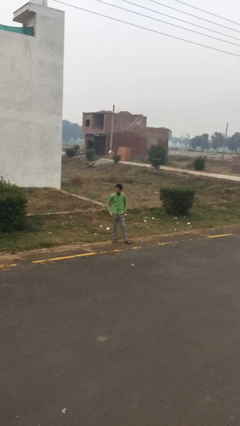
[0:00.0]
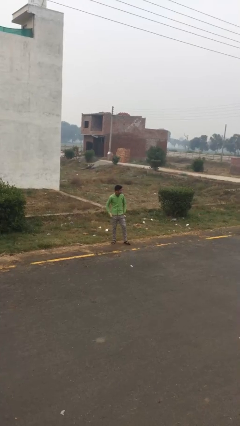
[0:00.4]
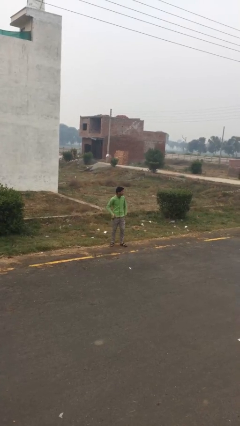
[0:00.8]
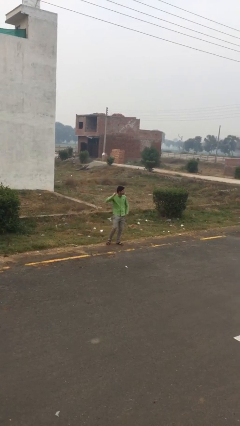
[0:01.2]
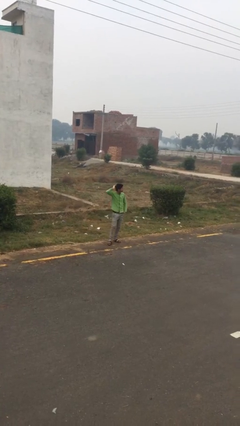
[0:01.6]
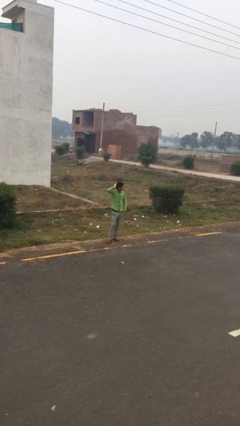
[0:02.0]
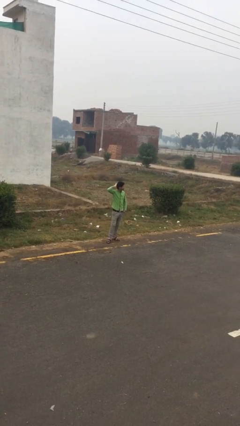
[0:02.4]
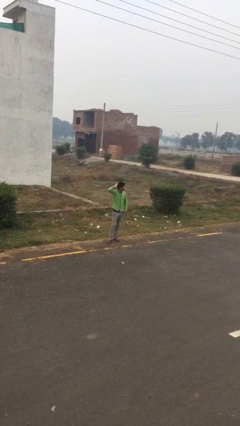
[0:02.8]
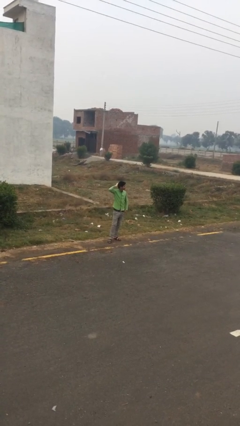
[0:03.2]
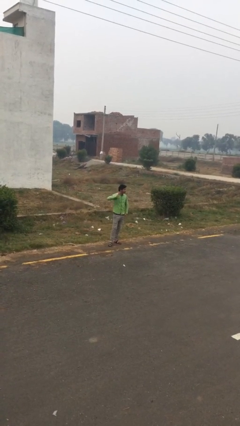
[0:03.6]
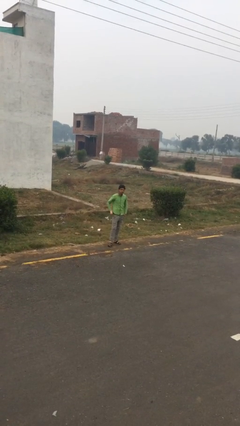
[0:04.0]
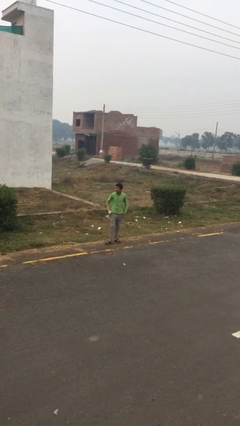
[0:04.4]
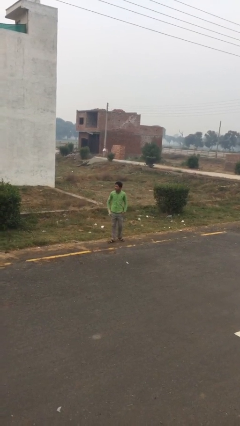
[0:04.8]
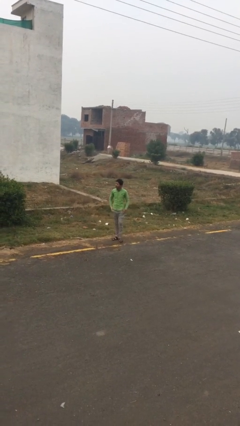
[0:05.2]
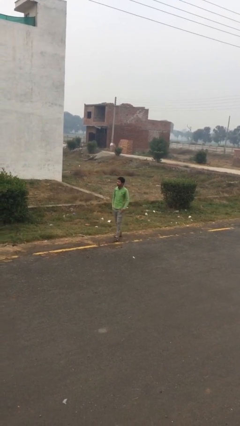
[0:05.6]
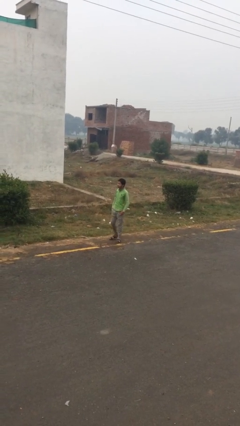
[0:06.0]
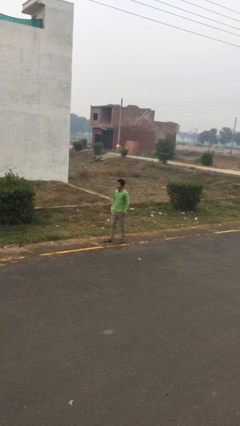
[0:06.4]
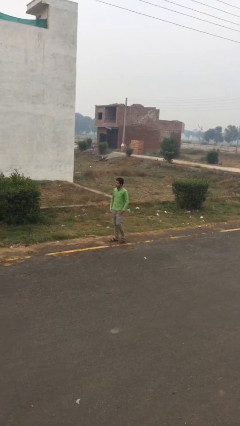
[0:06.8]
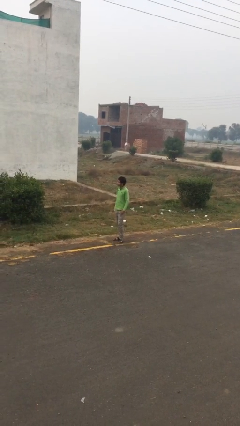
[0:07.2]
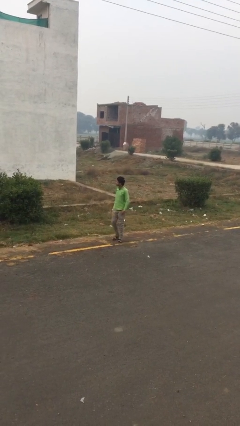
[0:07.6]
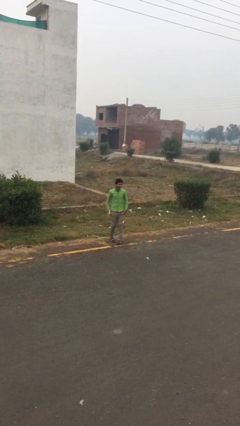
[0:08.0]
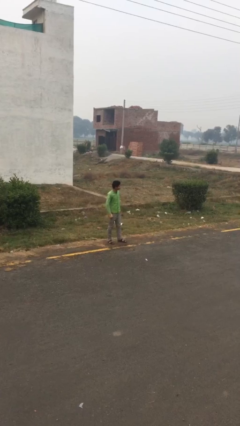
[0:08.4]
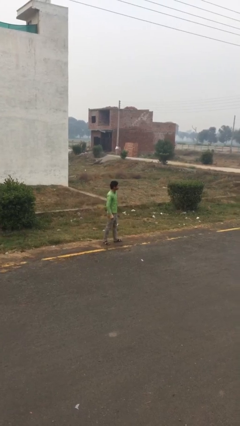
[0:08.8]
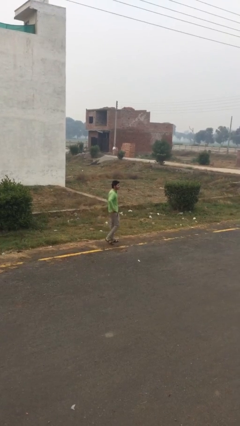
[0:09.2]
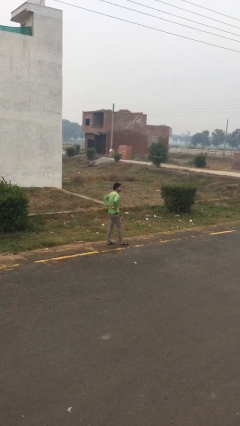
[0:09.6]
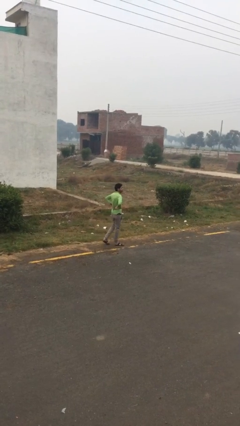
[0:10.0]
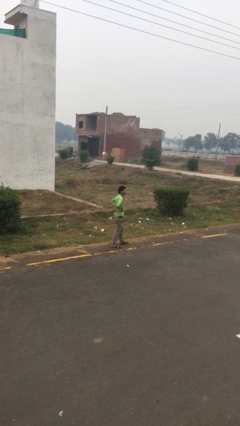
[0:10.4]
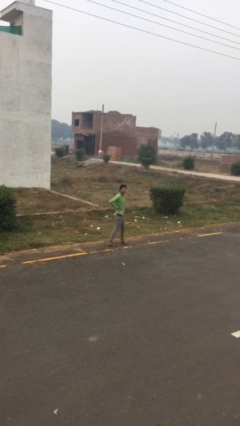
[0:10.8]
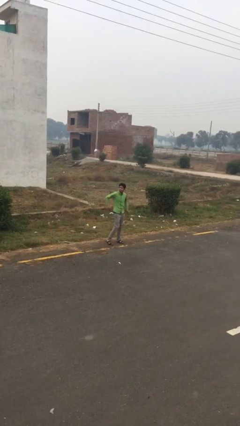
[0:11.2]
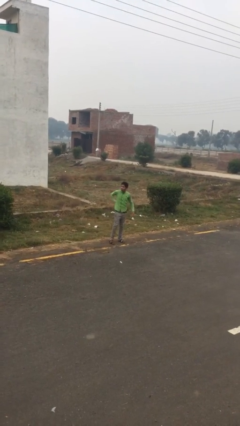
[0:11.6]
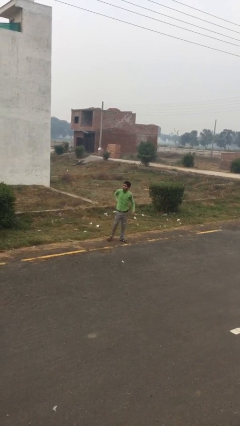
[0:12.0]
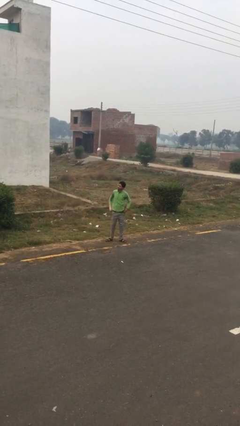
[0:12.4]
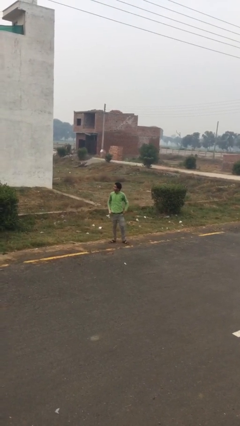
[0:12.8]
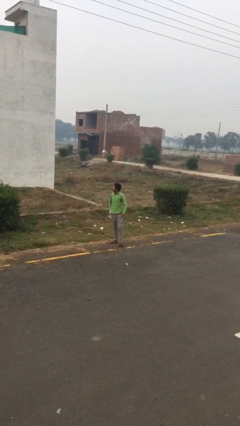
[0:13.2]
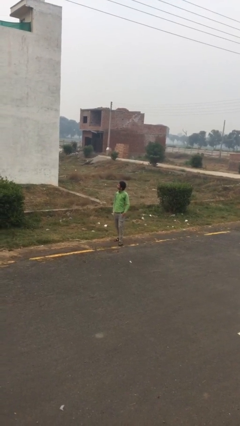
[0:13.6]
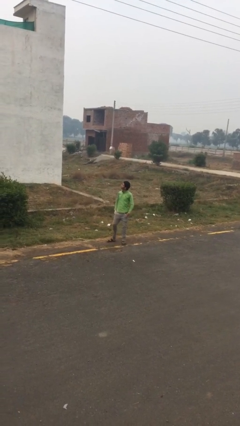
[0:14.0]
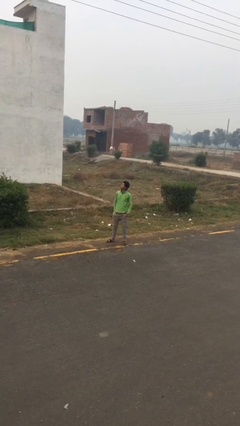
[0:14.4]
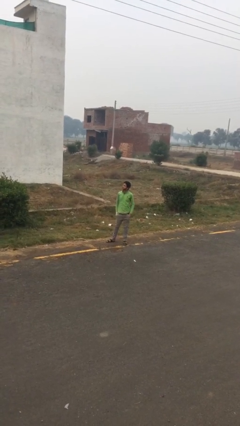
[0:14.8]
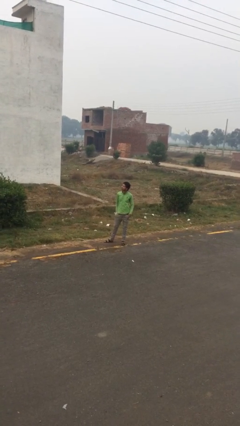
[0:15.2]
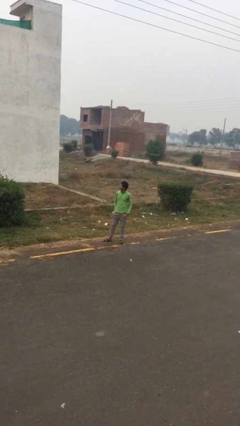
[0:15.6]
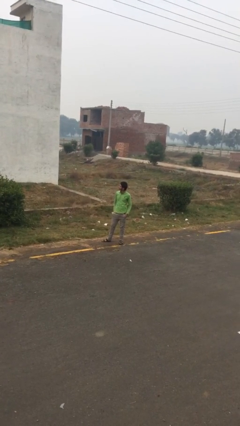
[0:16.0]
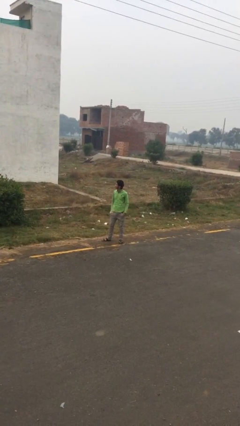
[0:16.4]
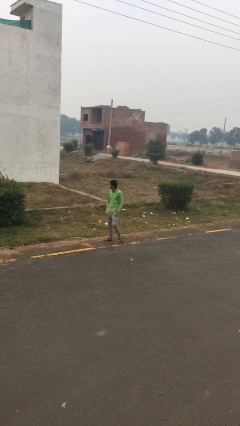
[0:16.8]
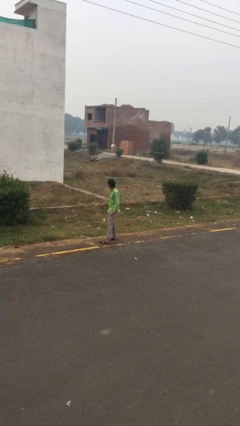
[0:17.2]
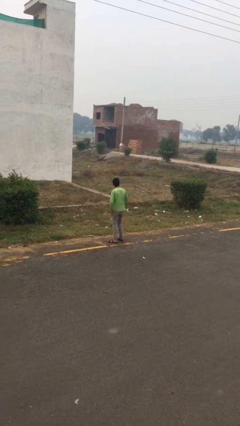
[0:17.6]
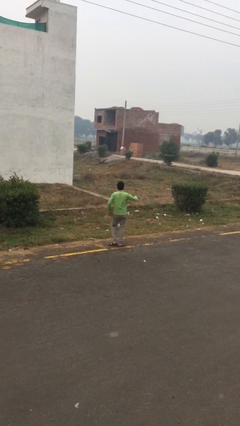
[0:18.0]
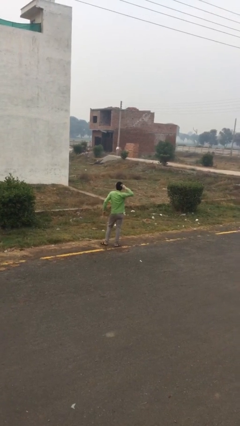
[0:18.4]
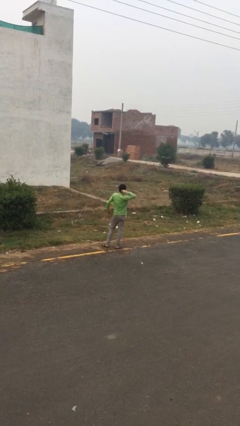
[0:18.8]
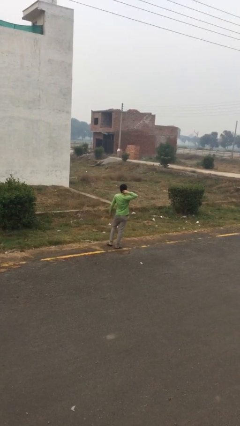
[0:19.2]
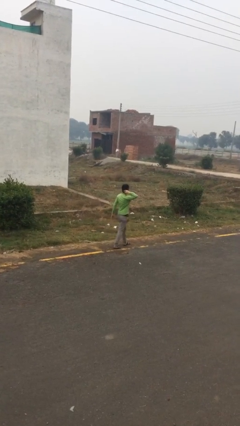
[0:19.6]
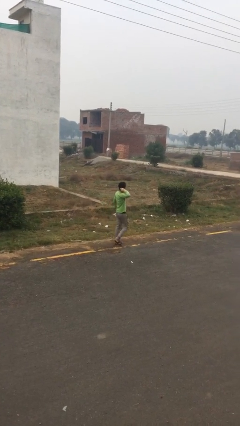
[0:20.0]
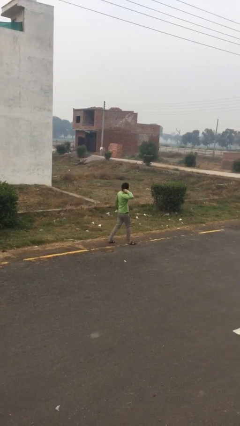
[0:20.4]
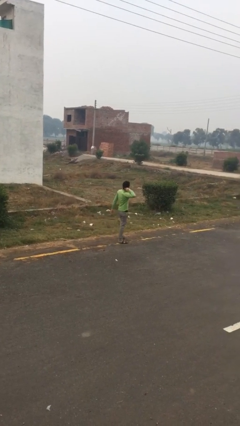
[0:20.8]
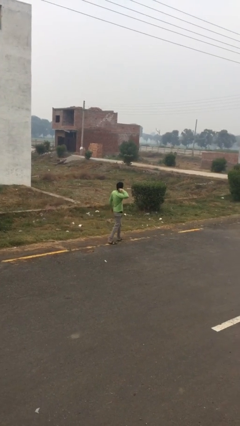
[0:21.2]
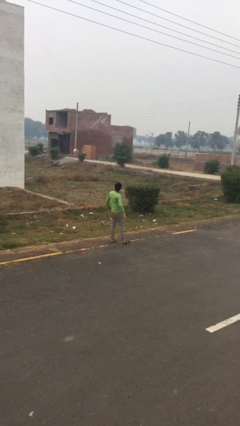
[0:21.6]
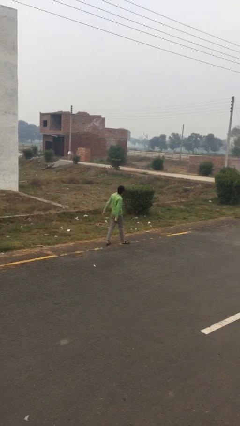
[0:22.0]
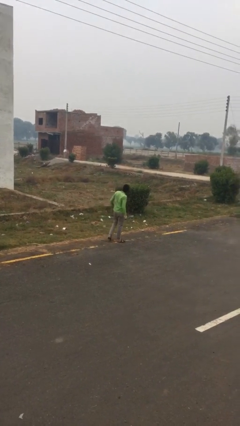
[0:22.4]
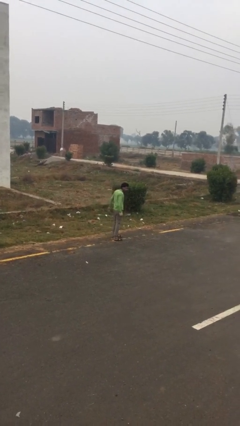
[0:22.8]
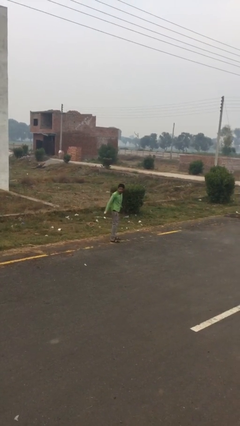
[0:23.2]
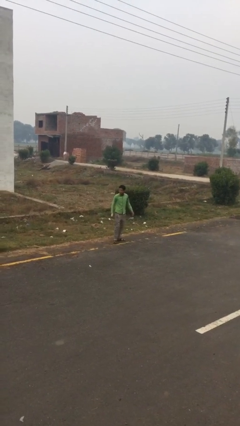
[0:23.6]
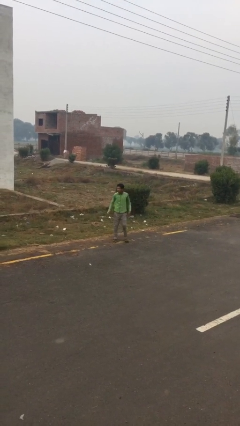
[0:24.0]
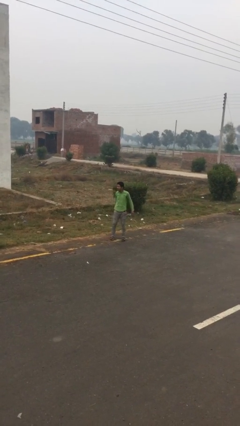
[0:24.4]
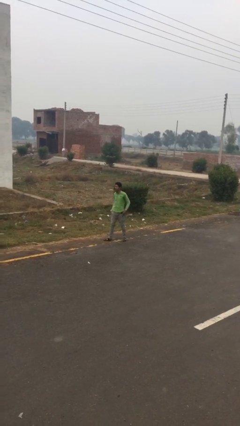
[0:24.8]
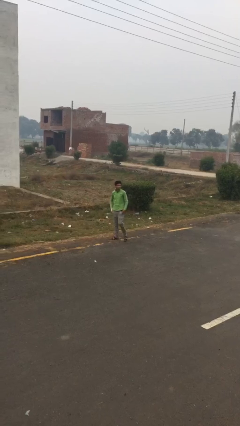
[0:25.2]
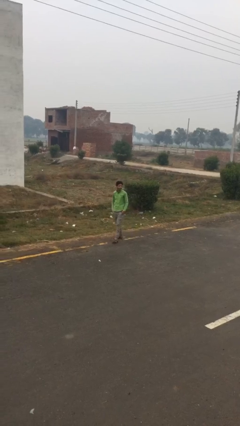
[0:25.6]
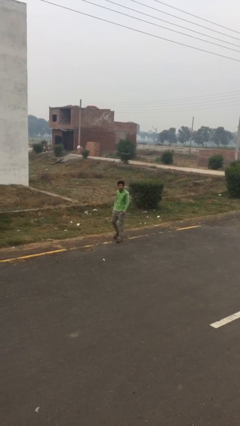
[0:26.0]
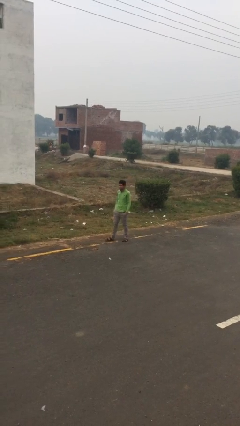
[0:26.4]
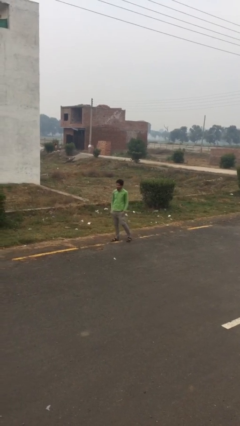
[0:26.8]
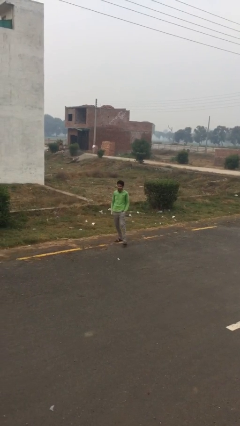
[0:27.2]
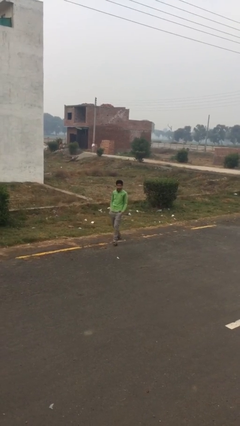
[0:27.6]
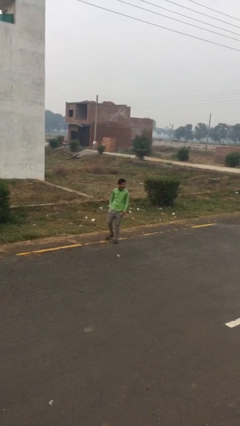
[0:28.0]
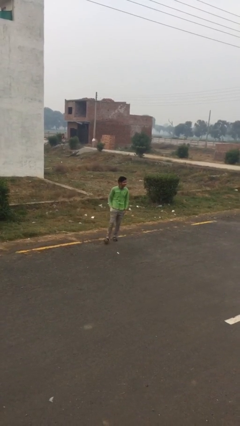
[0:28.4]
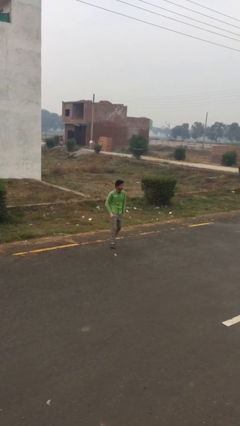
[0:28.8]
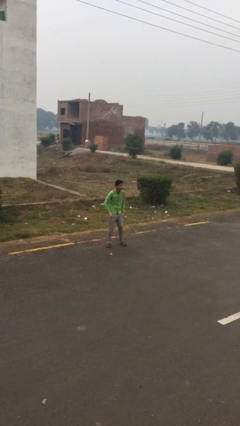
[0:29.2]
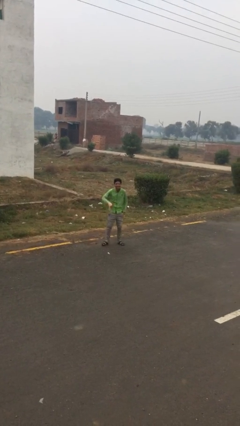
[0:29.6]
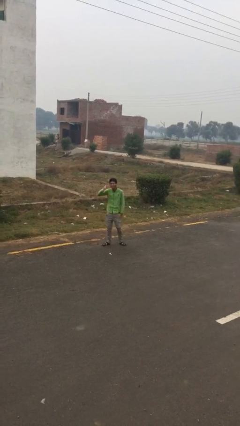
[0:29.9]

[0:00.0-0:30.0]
person walks

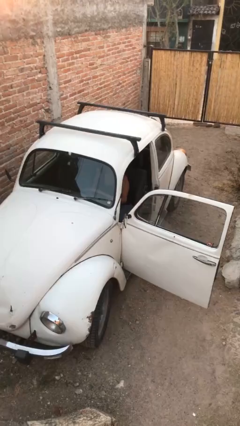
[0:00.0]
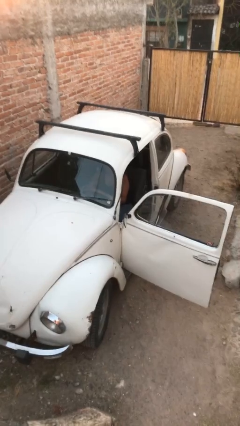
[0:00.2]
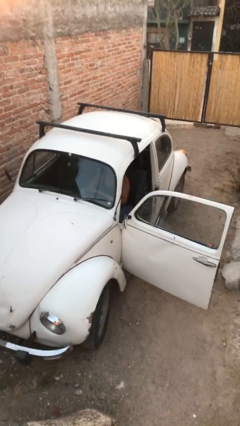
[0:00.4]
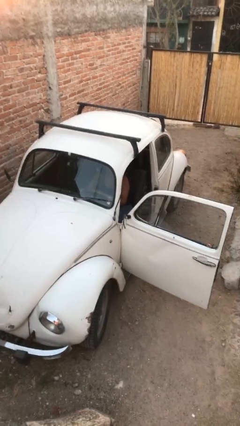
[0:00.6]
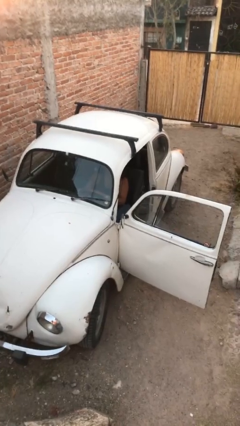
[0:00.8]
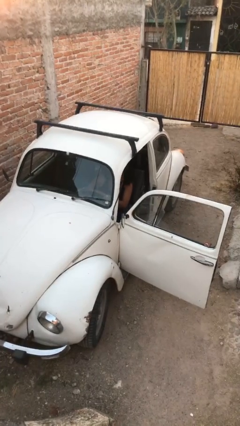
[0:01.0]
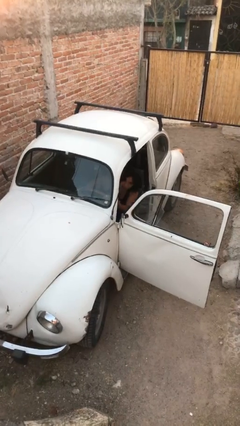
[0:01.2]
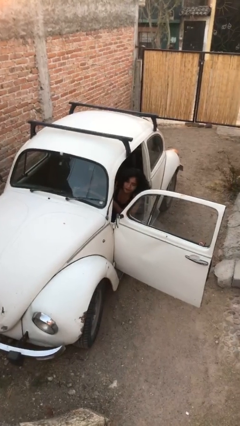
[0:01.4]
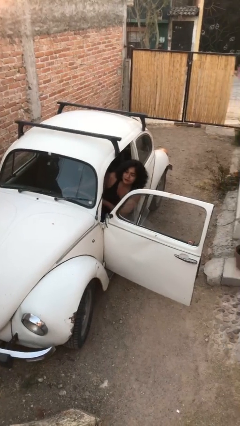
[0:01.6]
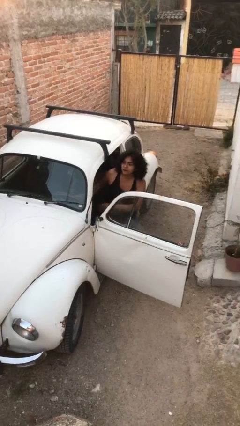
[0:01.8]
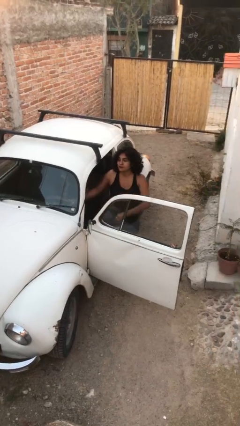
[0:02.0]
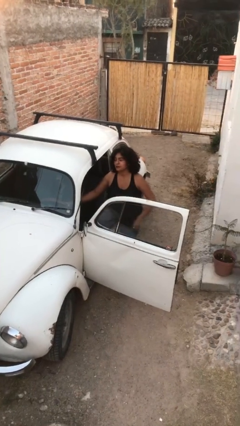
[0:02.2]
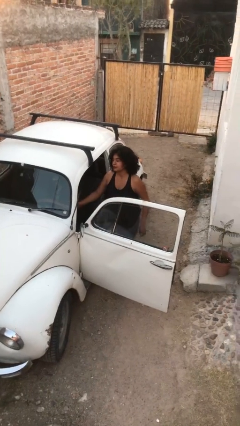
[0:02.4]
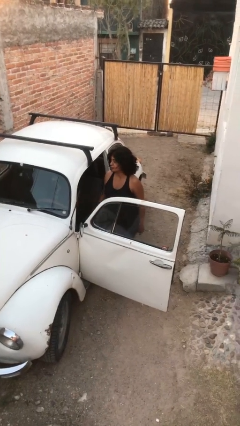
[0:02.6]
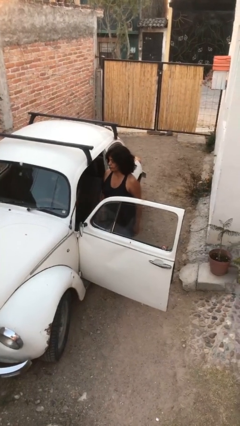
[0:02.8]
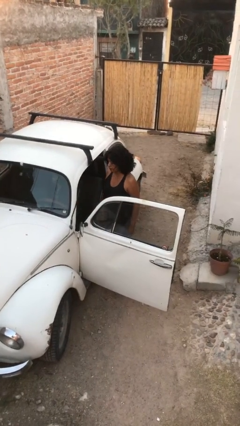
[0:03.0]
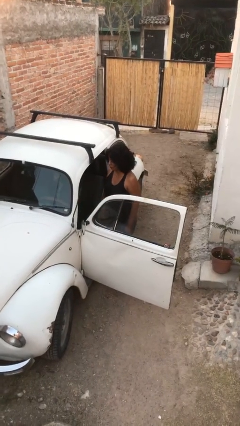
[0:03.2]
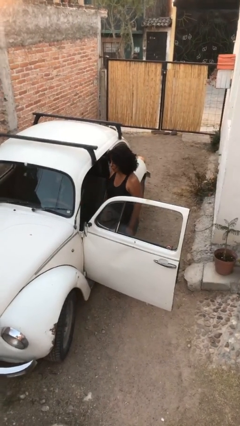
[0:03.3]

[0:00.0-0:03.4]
person exits car
